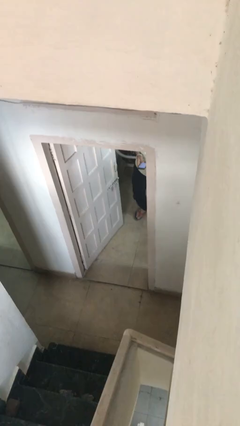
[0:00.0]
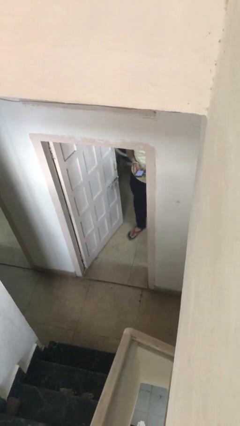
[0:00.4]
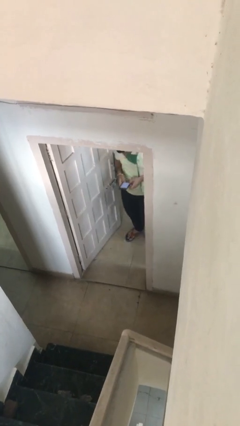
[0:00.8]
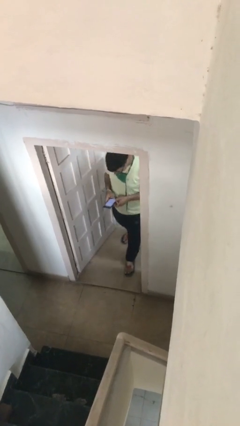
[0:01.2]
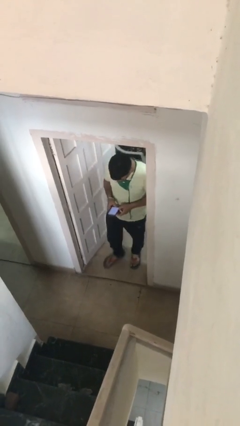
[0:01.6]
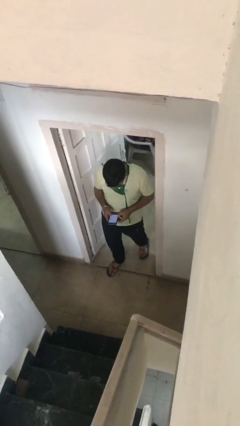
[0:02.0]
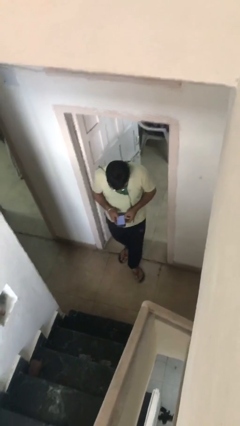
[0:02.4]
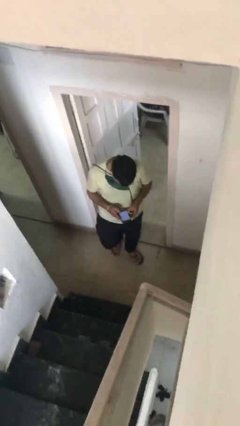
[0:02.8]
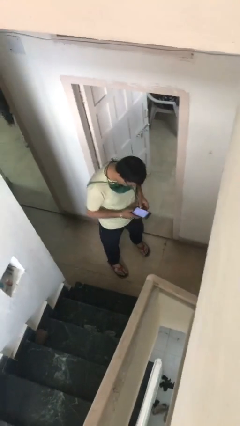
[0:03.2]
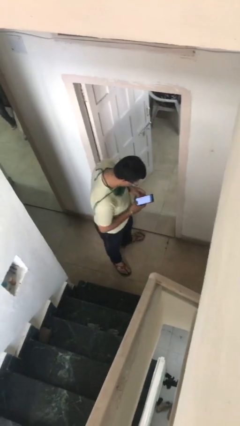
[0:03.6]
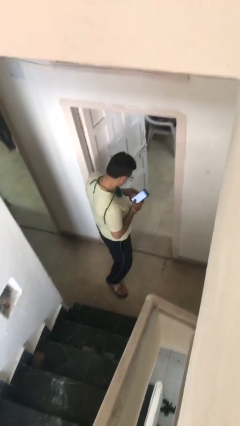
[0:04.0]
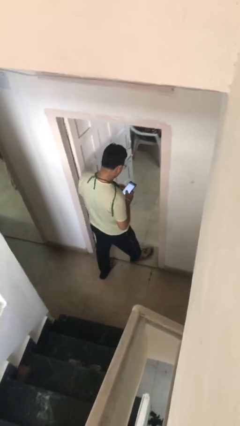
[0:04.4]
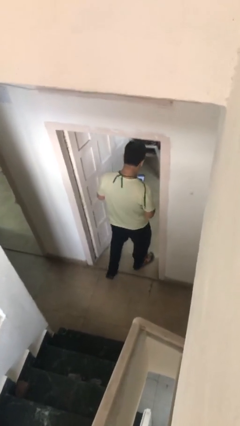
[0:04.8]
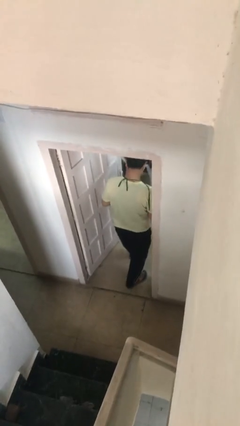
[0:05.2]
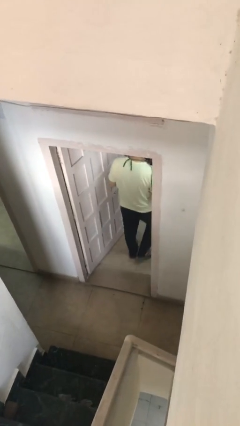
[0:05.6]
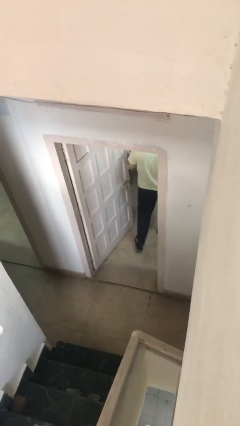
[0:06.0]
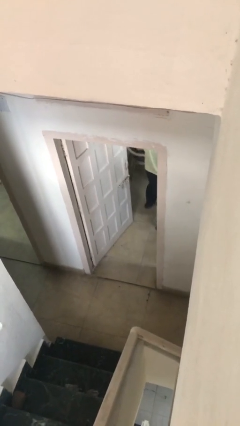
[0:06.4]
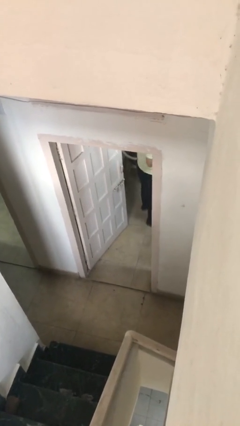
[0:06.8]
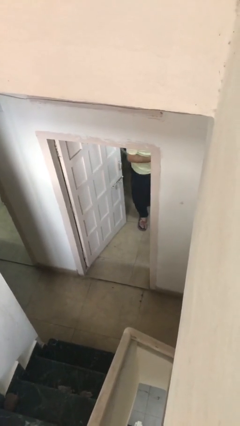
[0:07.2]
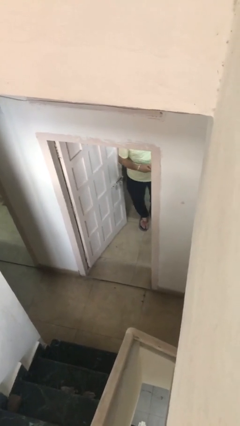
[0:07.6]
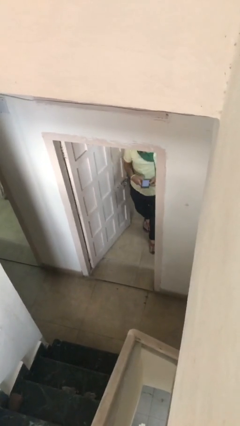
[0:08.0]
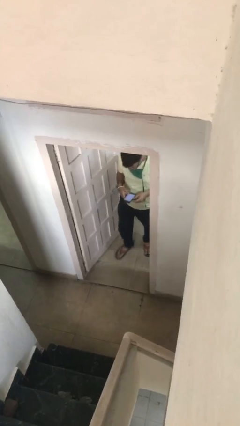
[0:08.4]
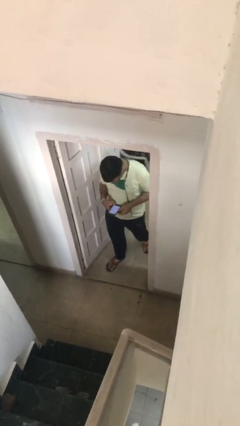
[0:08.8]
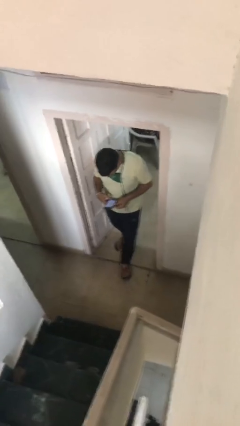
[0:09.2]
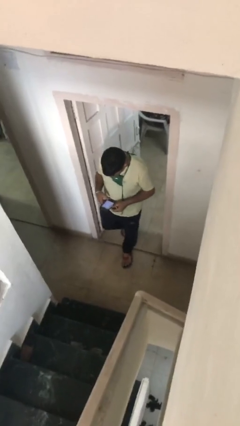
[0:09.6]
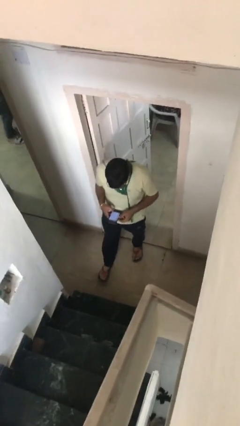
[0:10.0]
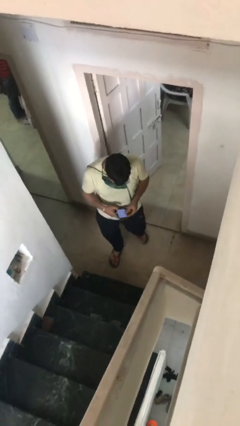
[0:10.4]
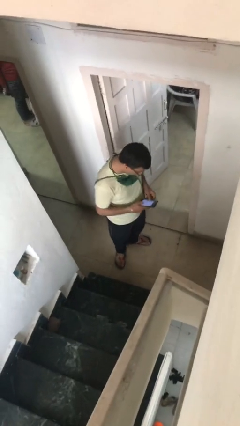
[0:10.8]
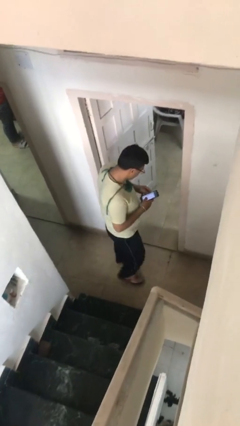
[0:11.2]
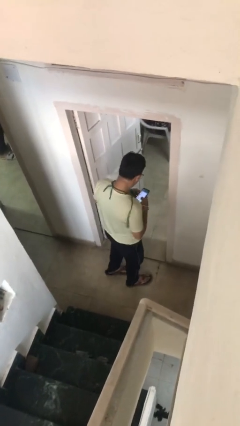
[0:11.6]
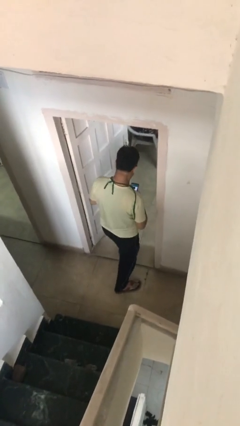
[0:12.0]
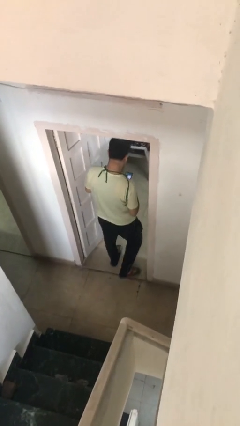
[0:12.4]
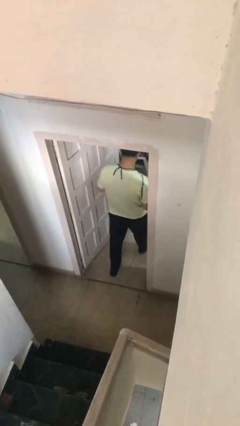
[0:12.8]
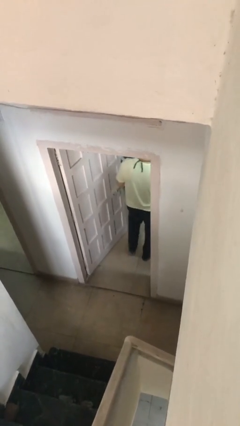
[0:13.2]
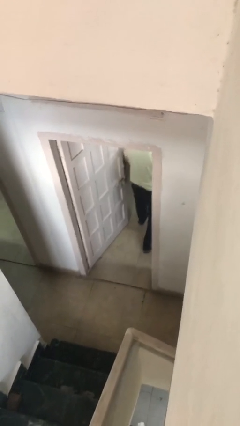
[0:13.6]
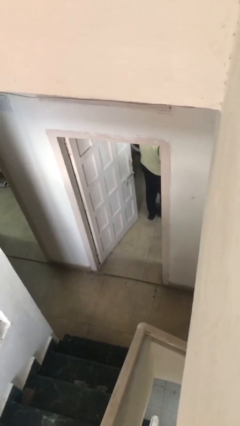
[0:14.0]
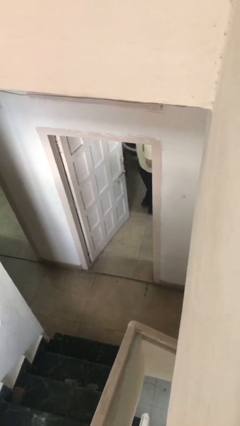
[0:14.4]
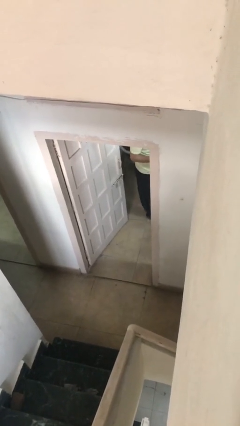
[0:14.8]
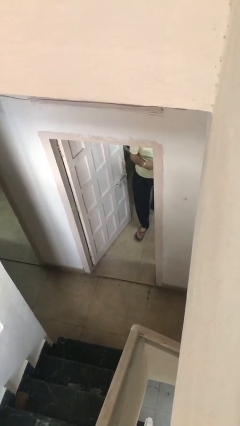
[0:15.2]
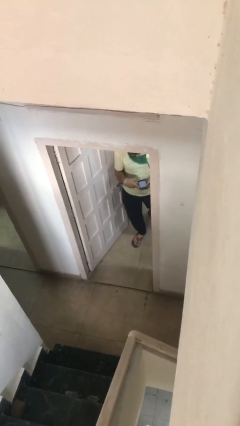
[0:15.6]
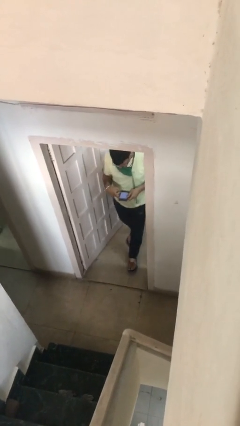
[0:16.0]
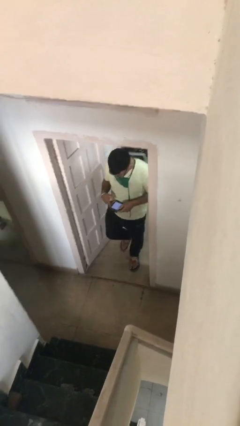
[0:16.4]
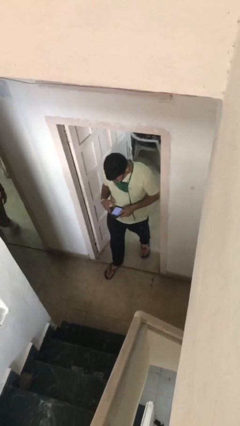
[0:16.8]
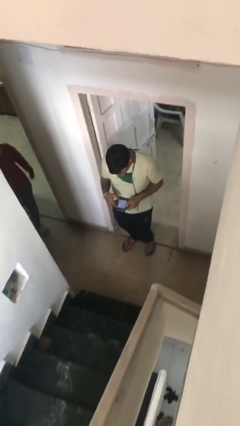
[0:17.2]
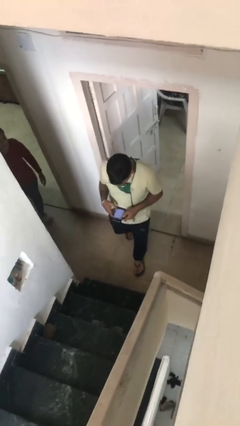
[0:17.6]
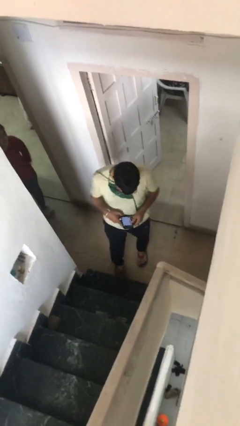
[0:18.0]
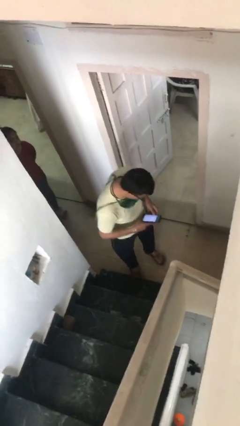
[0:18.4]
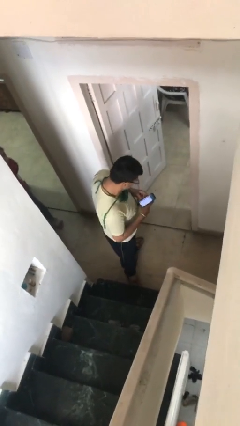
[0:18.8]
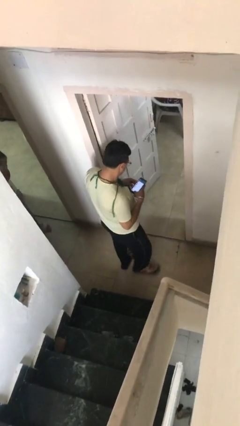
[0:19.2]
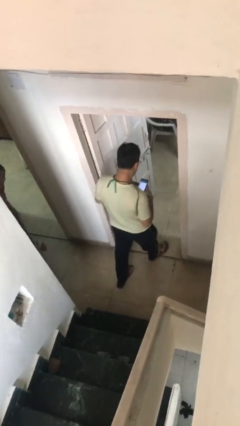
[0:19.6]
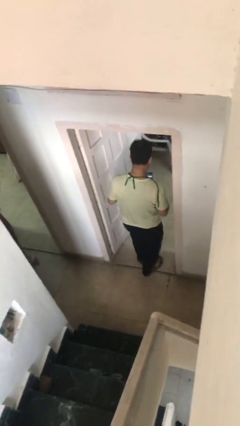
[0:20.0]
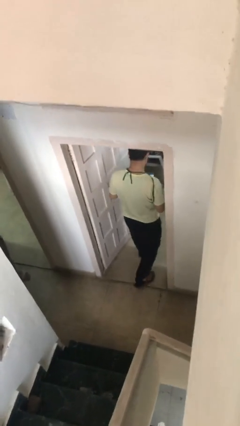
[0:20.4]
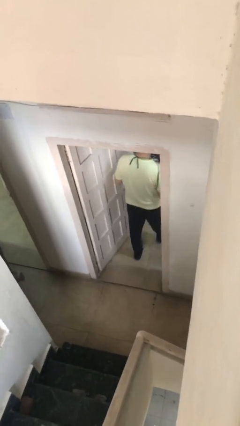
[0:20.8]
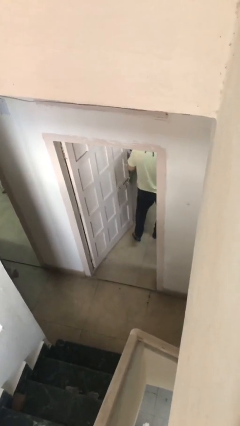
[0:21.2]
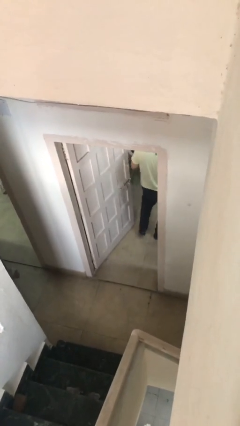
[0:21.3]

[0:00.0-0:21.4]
person texts on phone

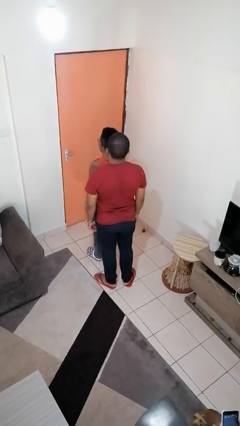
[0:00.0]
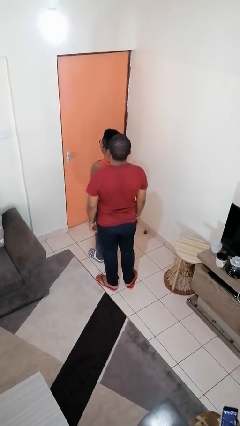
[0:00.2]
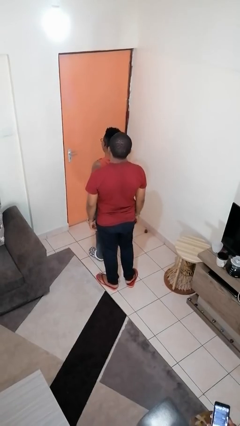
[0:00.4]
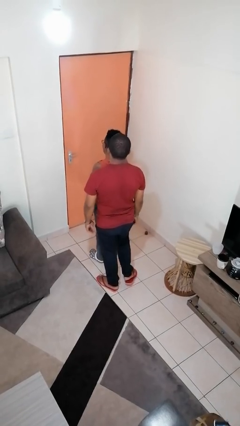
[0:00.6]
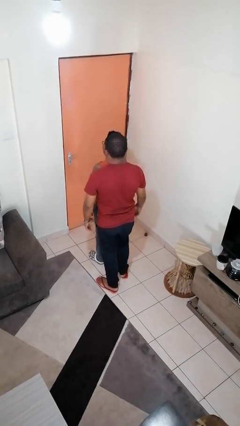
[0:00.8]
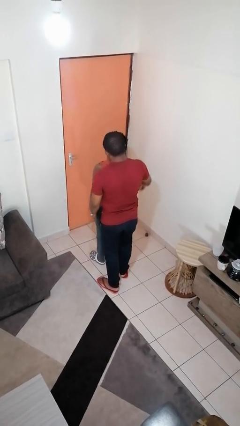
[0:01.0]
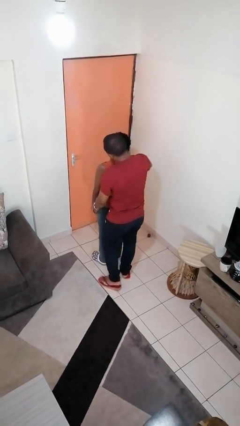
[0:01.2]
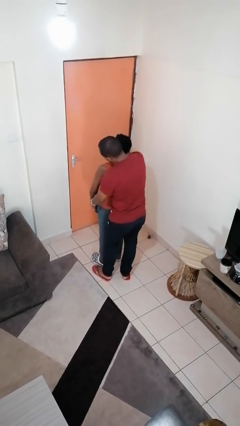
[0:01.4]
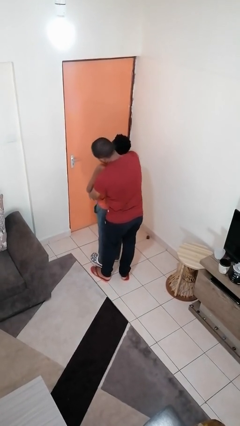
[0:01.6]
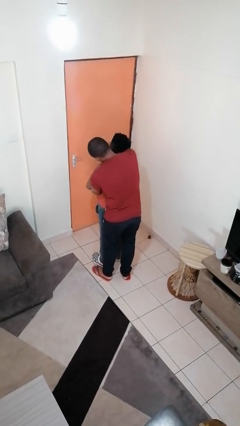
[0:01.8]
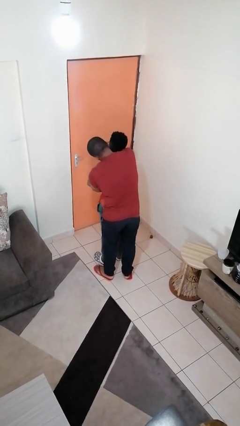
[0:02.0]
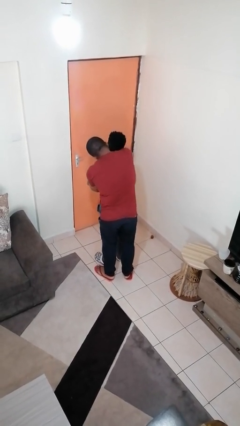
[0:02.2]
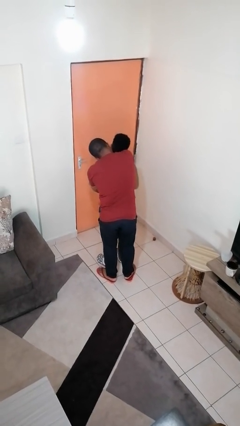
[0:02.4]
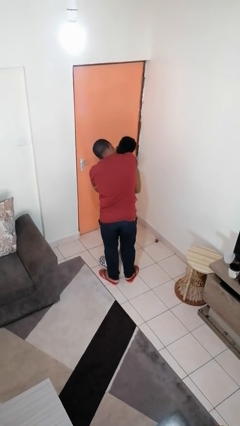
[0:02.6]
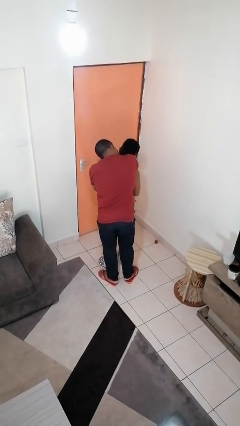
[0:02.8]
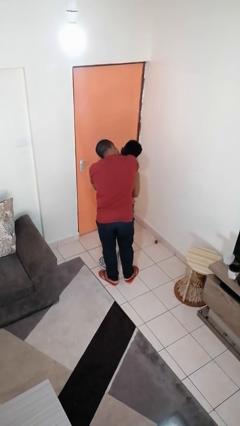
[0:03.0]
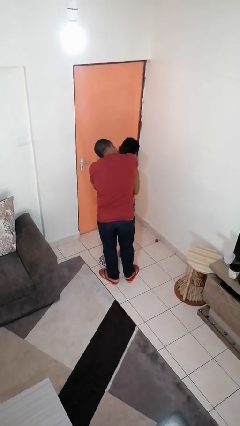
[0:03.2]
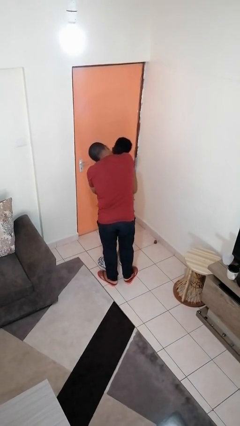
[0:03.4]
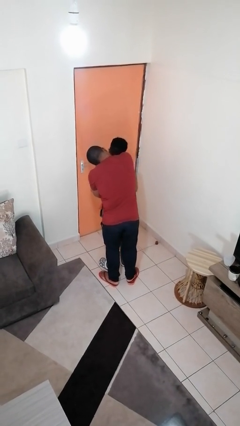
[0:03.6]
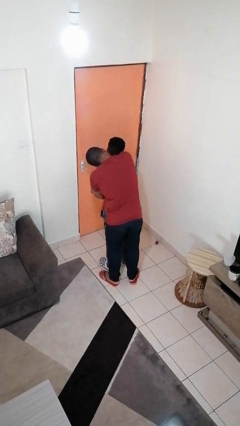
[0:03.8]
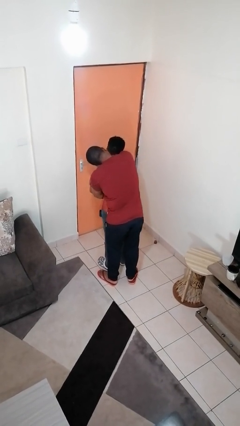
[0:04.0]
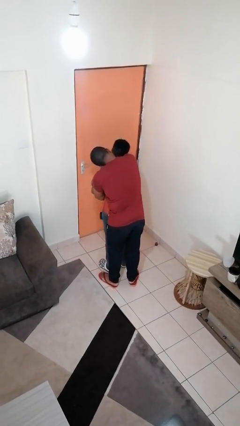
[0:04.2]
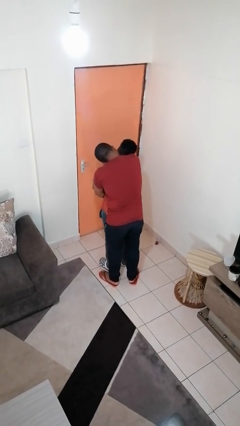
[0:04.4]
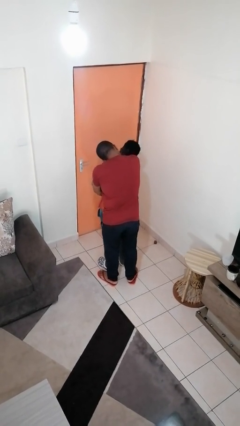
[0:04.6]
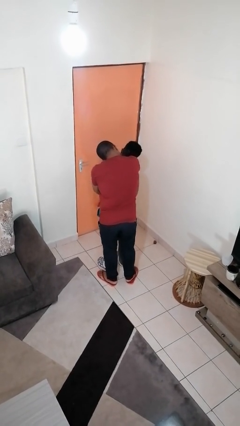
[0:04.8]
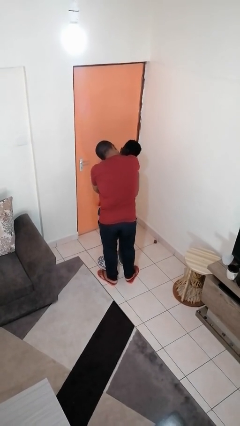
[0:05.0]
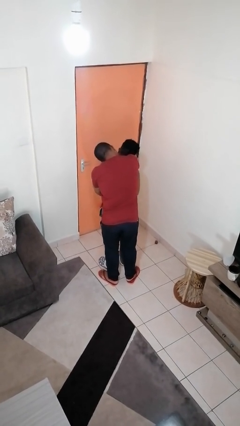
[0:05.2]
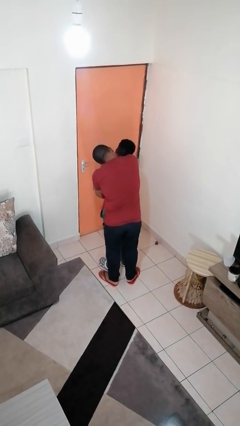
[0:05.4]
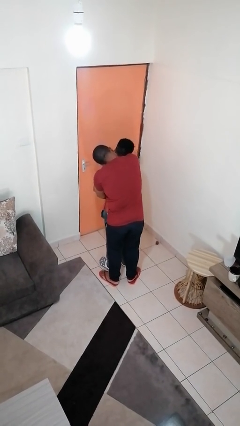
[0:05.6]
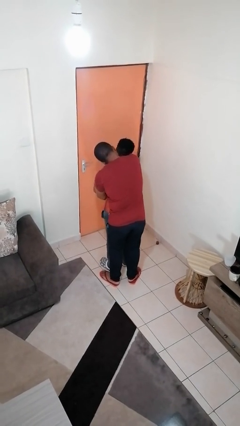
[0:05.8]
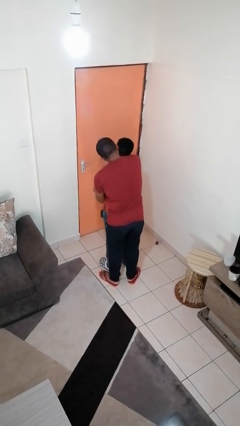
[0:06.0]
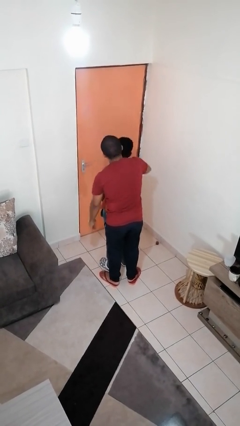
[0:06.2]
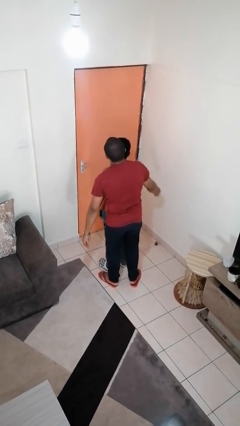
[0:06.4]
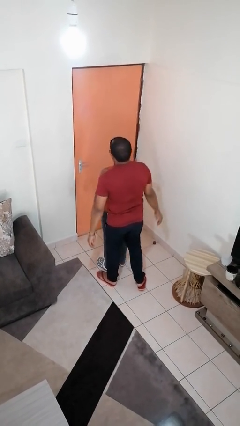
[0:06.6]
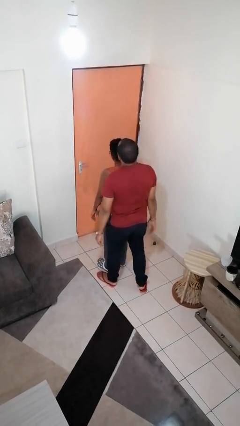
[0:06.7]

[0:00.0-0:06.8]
person hugs person from behind

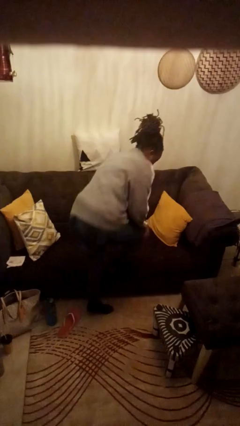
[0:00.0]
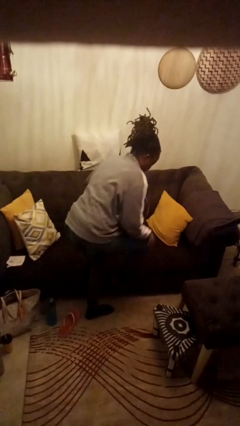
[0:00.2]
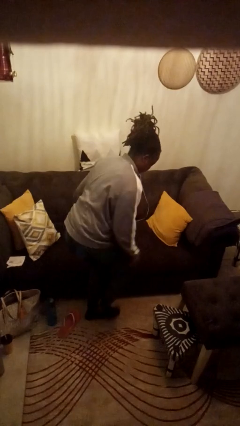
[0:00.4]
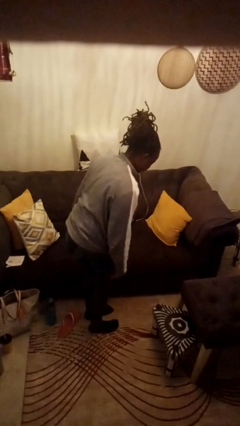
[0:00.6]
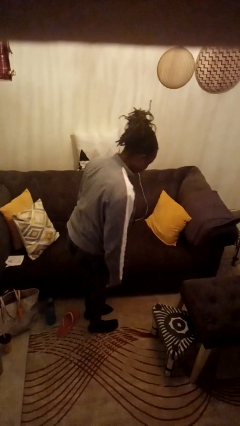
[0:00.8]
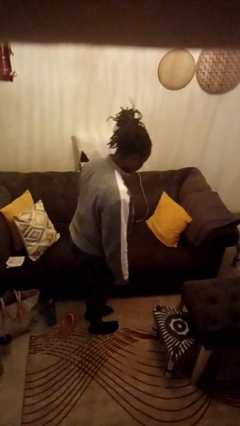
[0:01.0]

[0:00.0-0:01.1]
person climbs off chair
